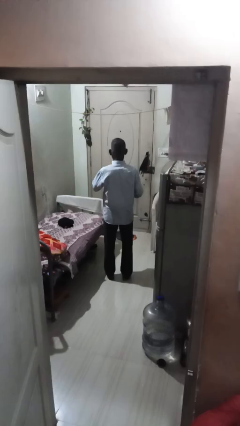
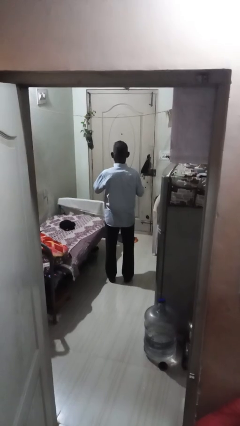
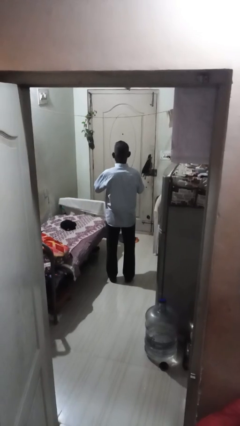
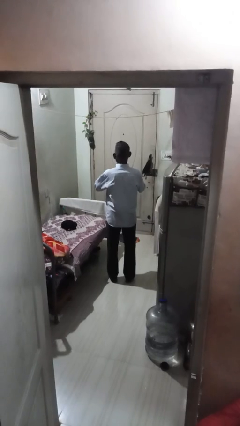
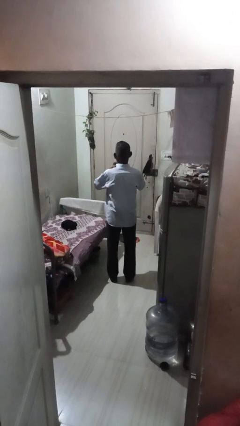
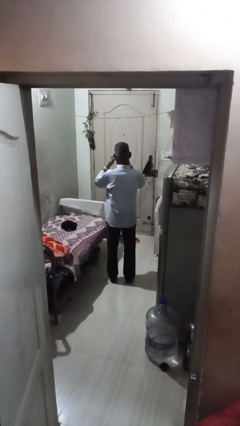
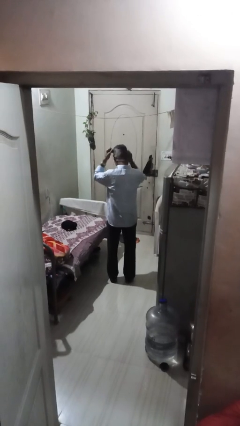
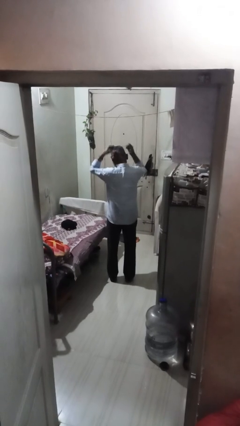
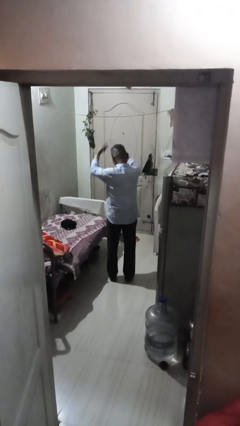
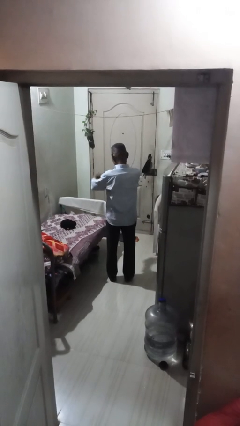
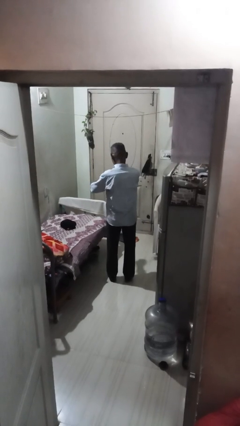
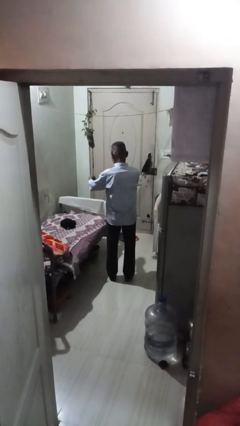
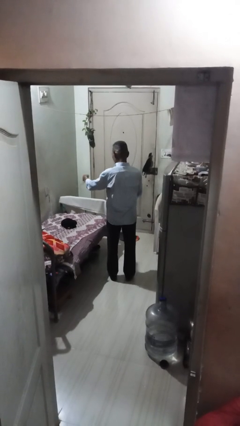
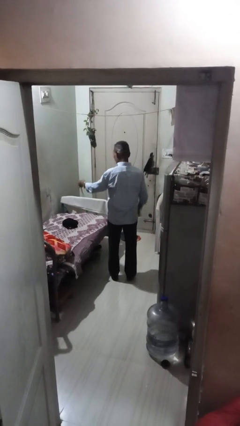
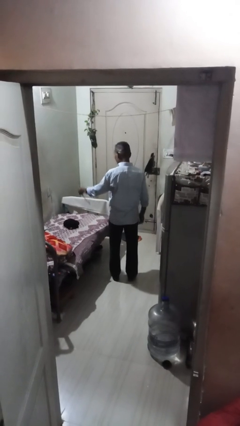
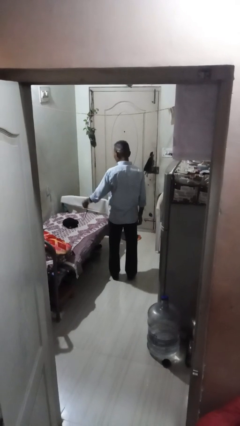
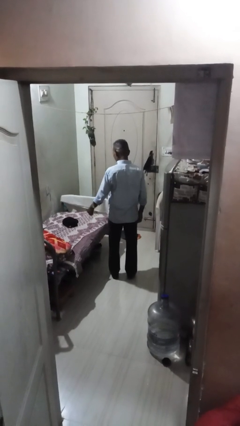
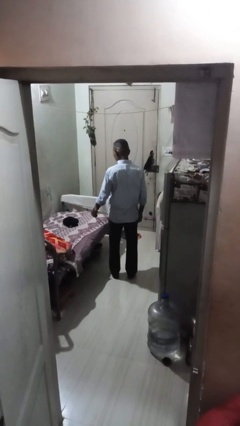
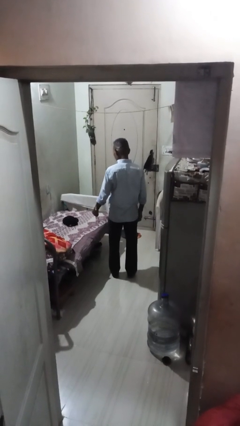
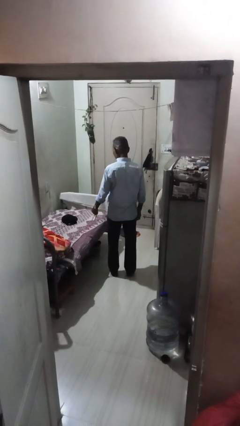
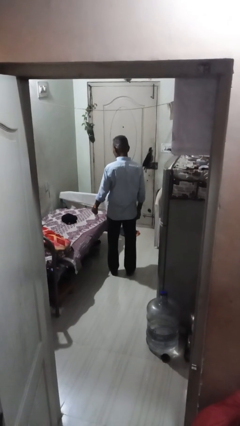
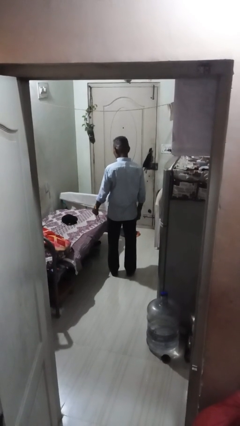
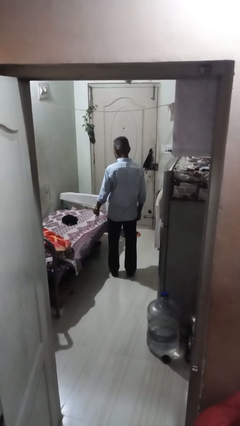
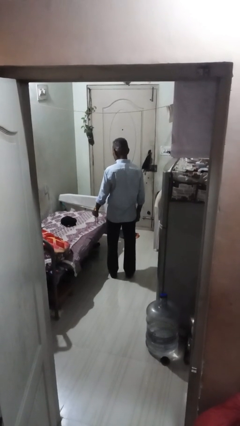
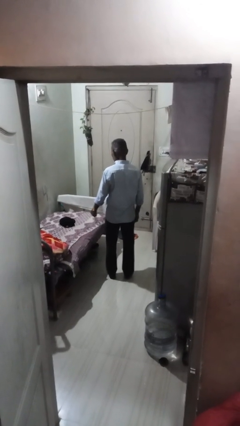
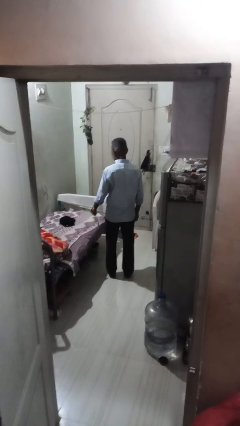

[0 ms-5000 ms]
person takes off necklace

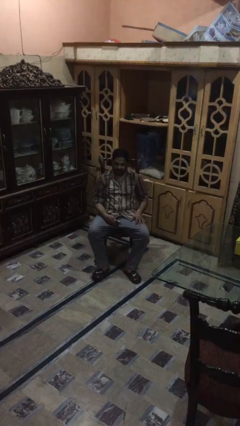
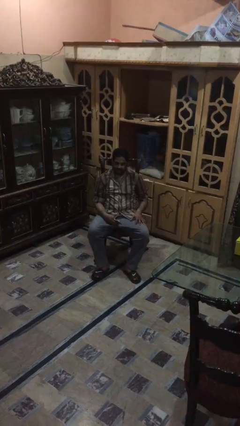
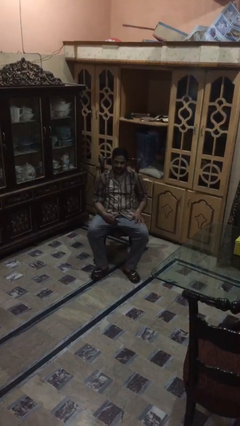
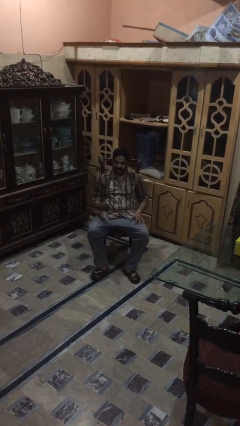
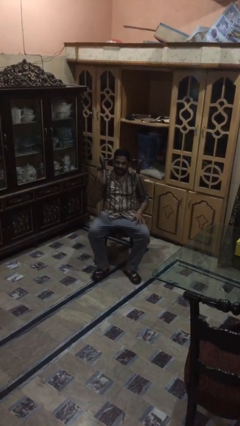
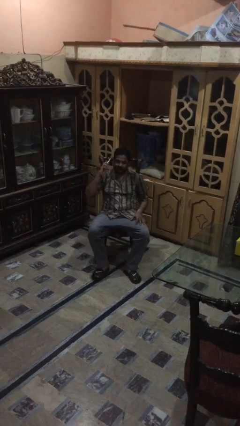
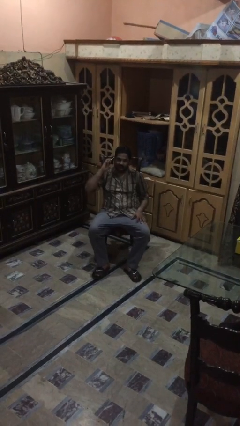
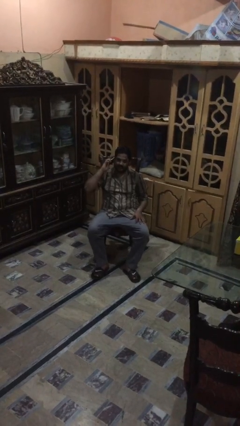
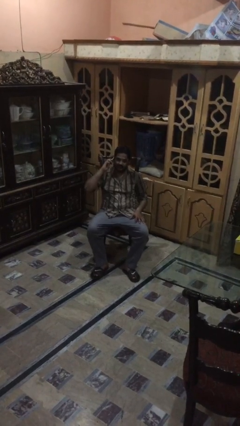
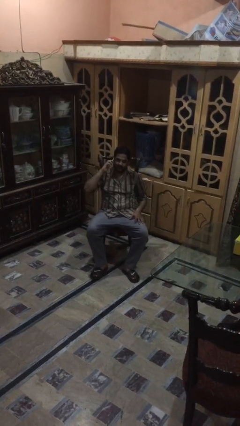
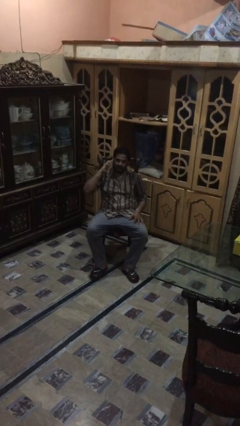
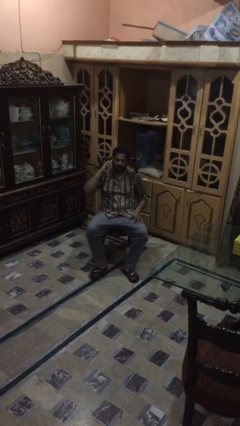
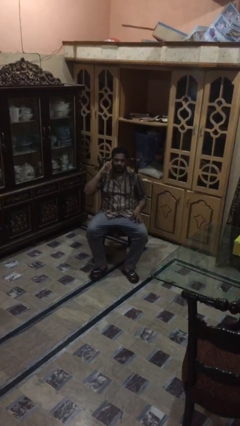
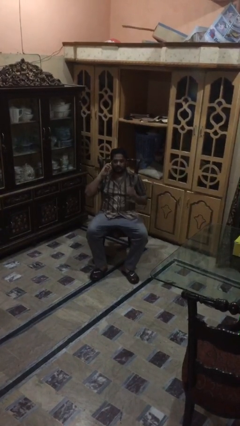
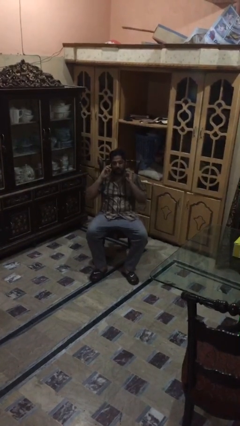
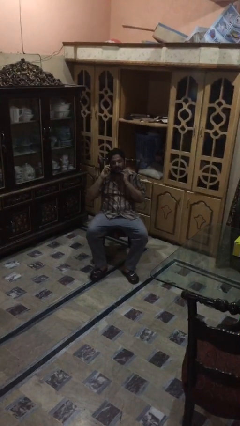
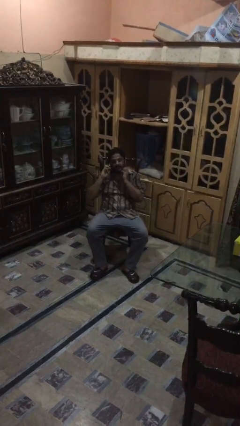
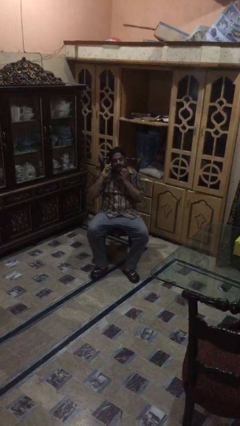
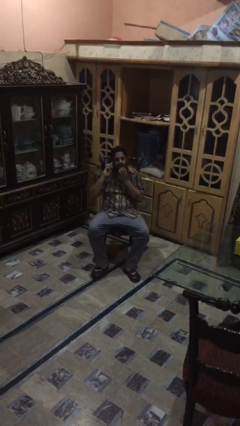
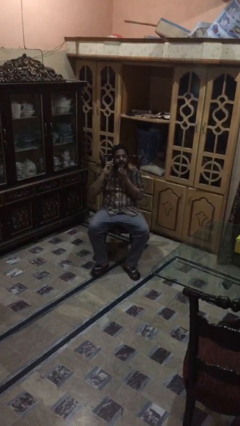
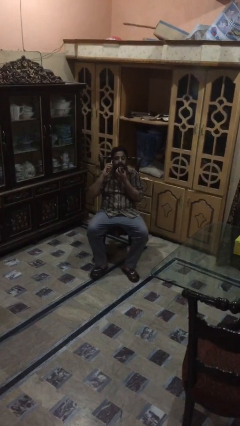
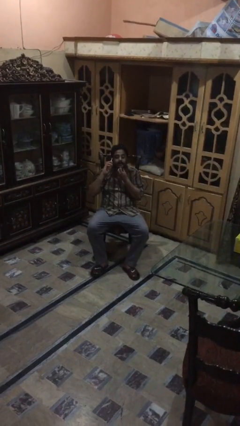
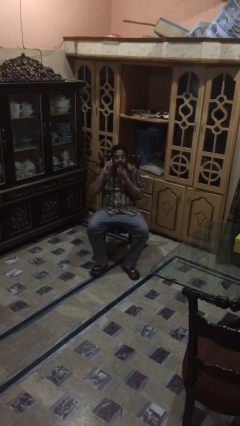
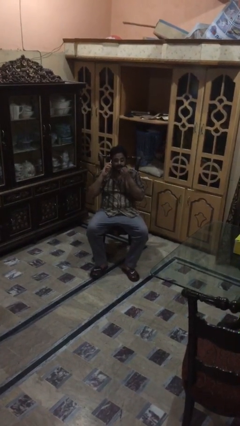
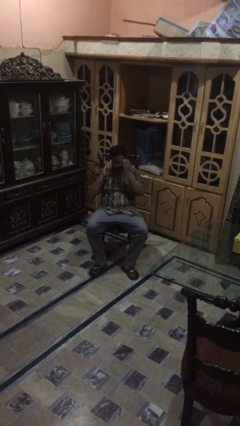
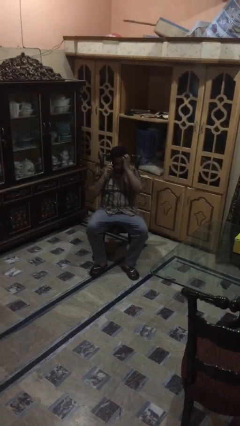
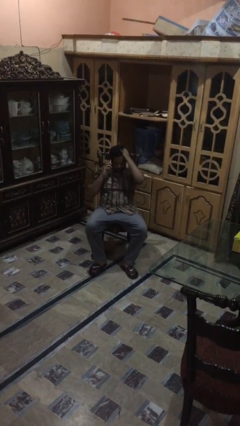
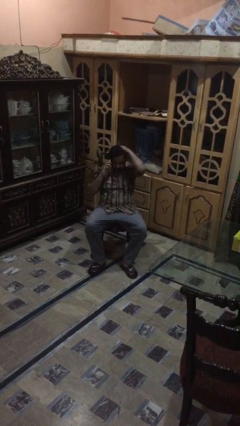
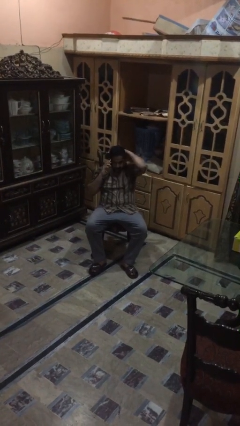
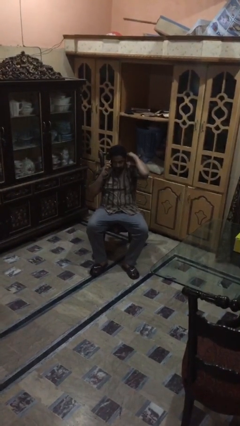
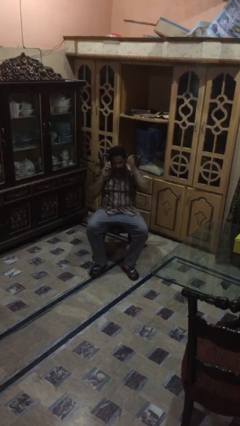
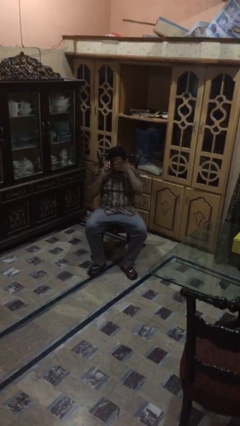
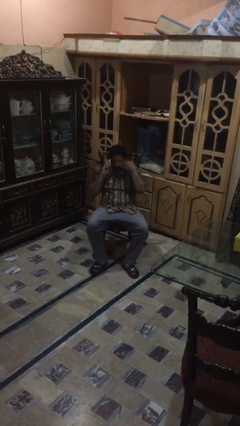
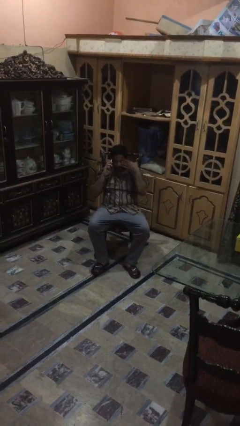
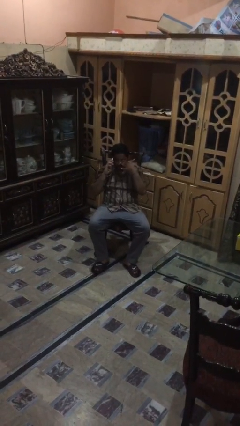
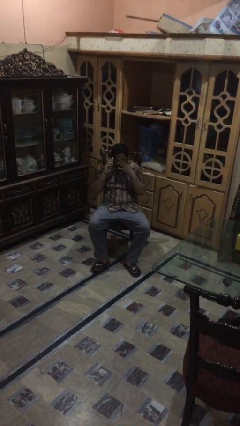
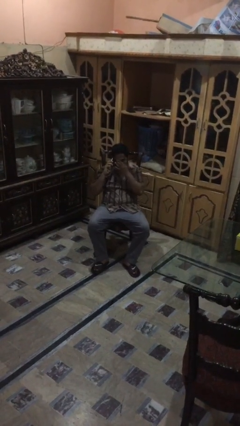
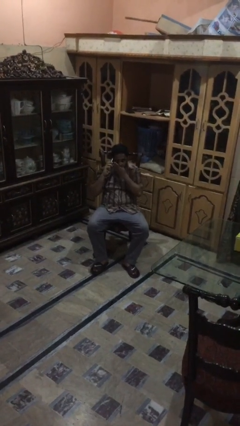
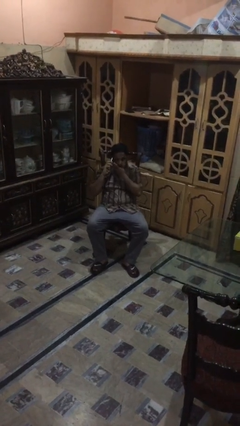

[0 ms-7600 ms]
person talks on phone

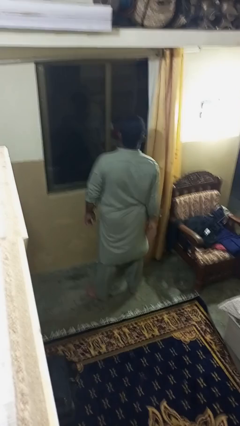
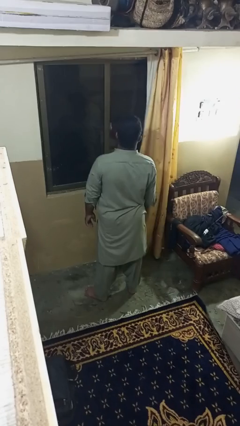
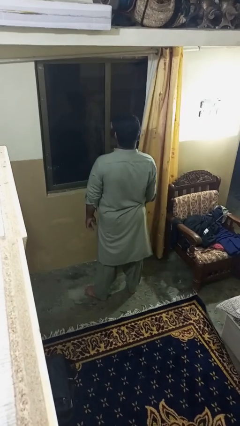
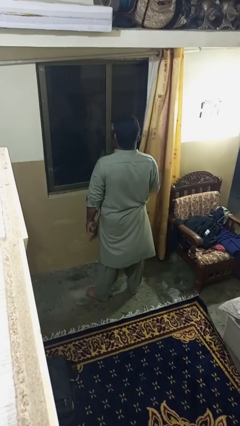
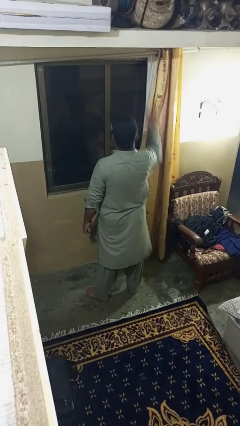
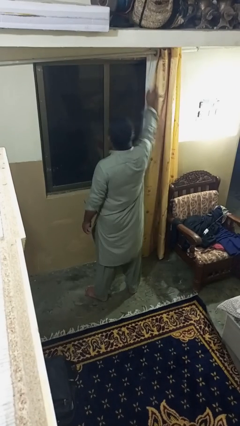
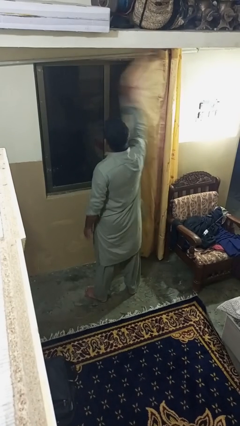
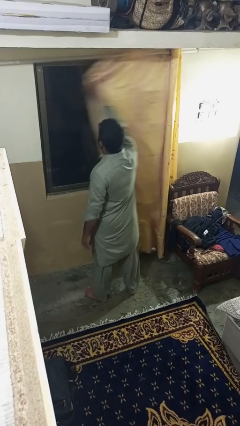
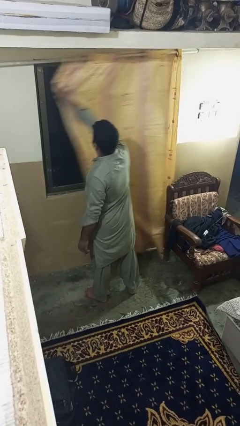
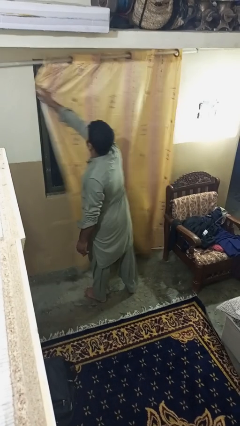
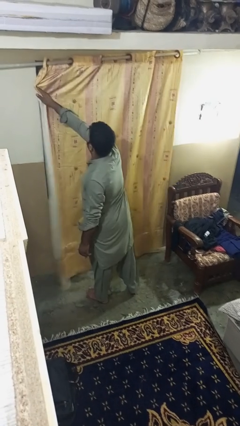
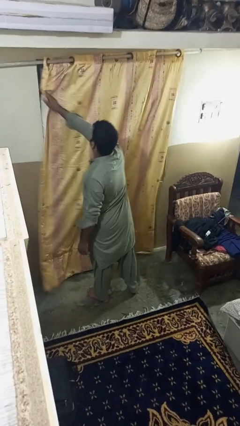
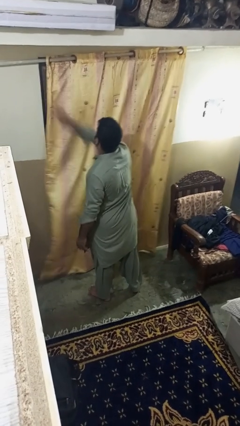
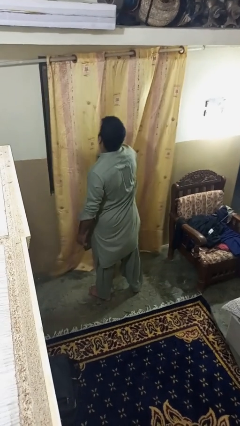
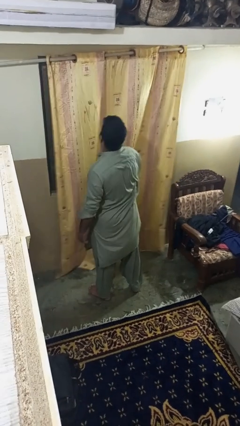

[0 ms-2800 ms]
person closes curtains

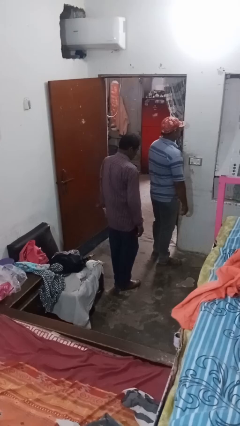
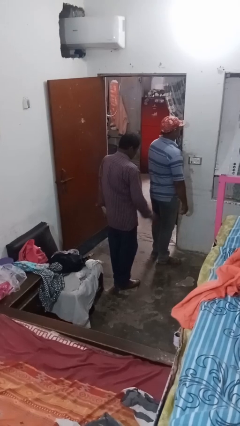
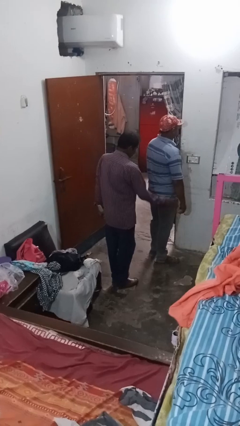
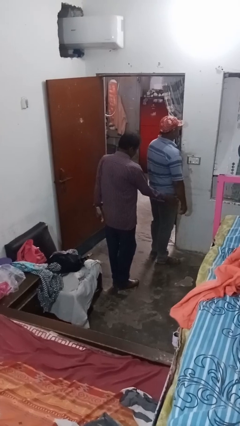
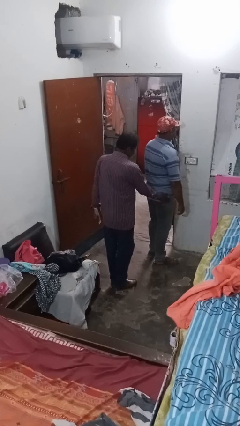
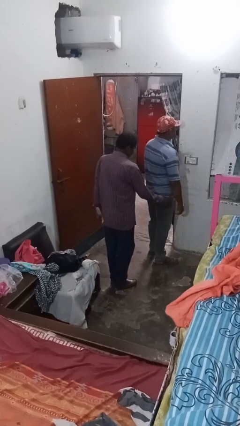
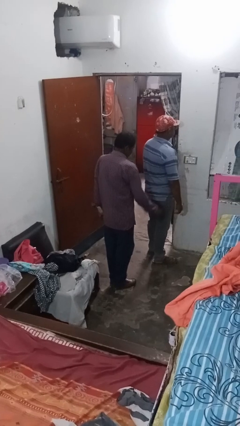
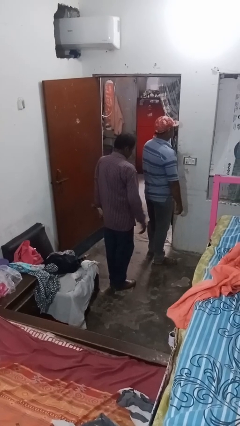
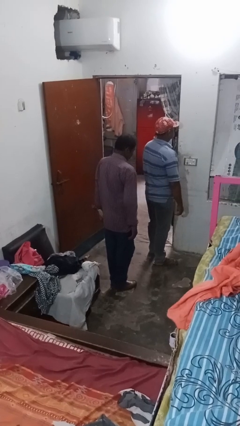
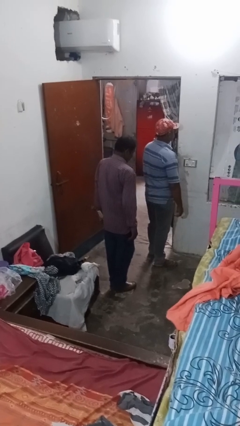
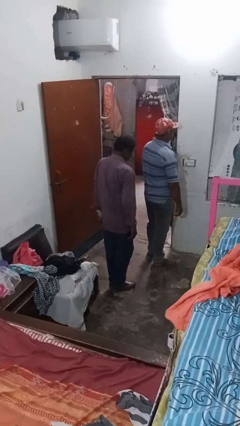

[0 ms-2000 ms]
person bumps into person

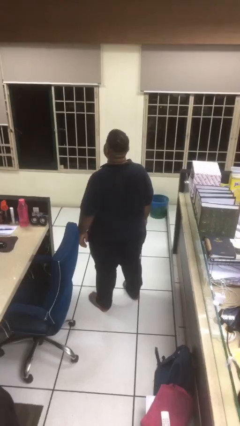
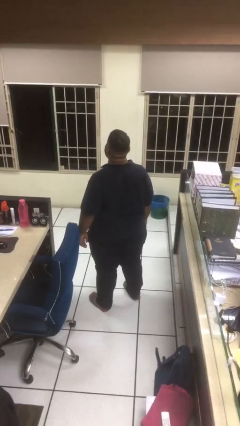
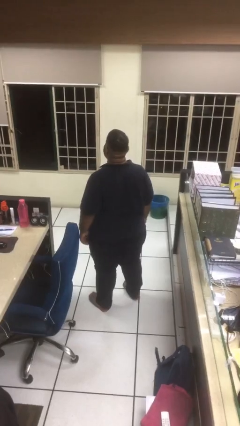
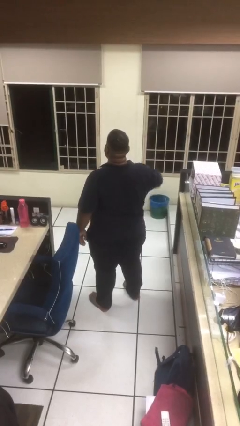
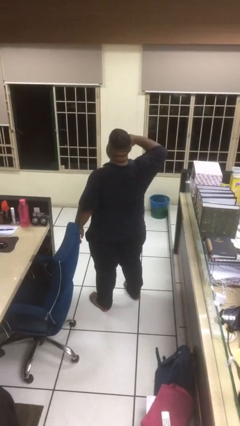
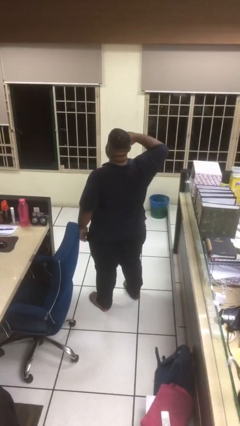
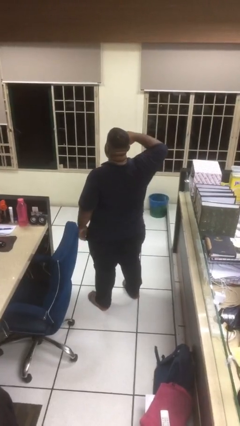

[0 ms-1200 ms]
person salutes
